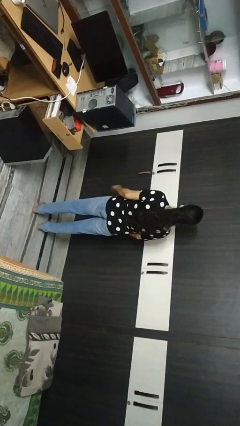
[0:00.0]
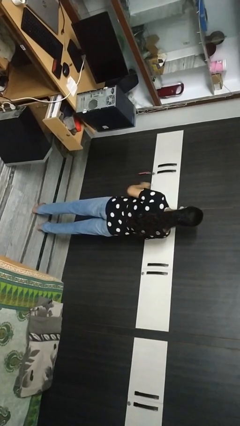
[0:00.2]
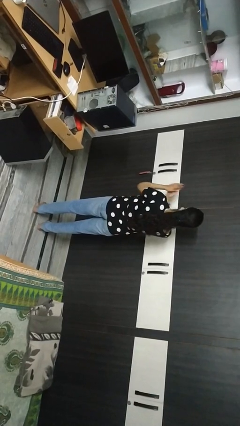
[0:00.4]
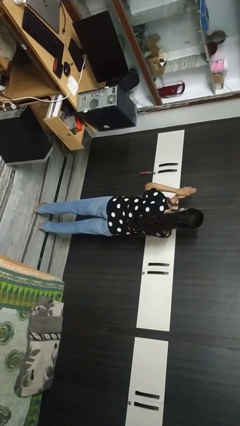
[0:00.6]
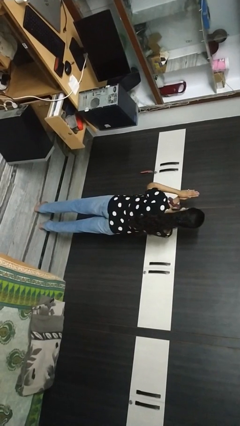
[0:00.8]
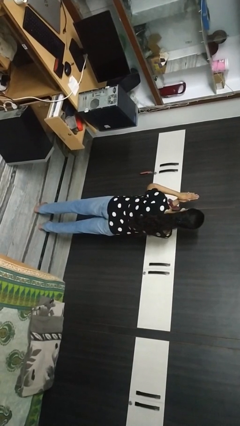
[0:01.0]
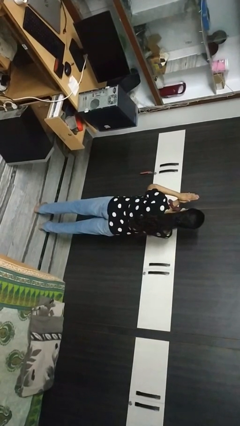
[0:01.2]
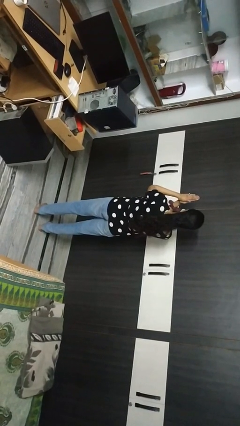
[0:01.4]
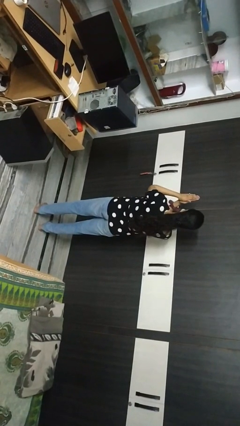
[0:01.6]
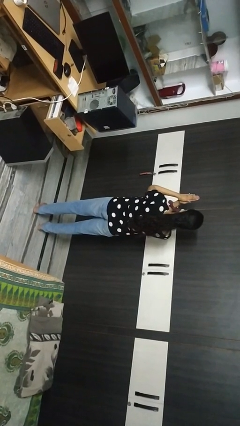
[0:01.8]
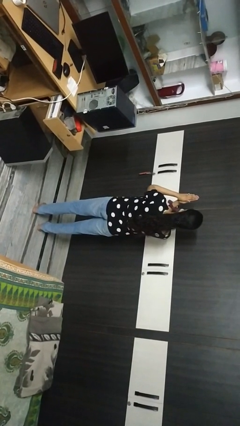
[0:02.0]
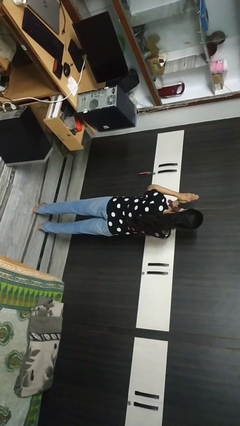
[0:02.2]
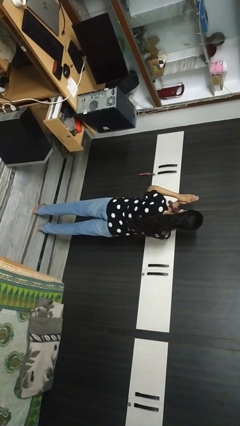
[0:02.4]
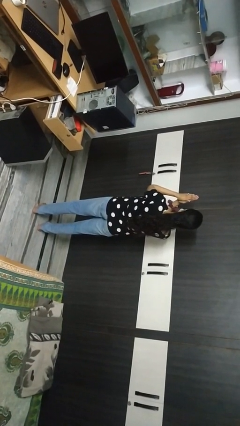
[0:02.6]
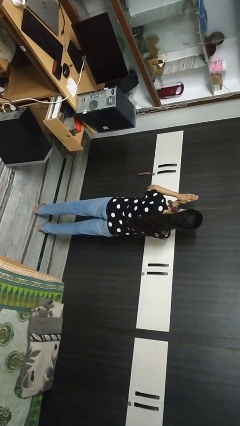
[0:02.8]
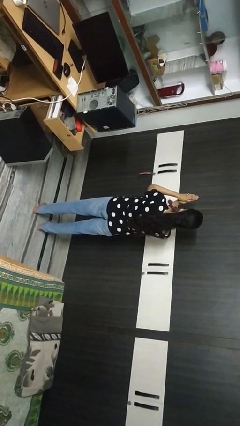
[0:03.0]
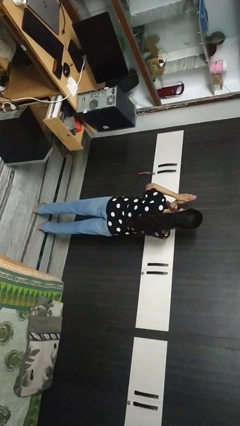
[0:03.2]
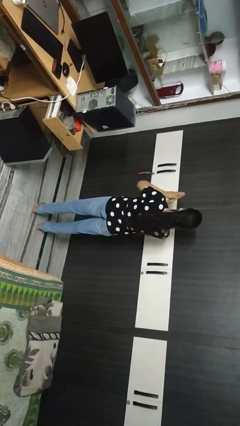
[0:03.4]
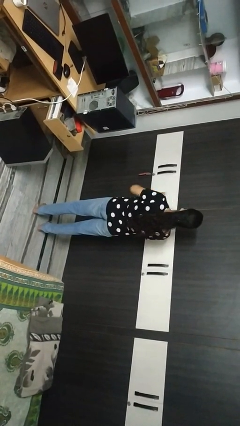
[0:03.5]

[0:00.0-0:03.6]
person prays

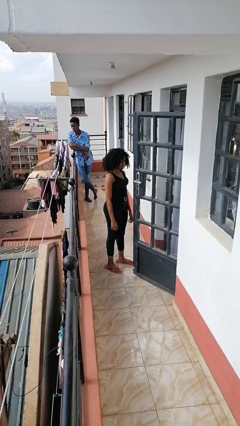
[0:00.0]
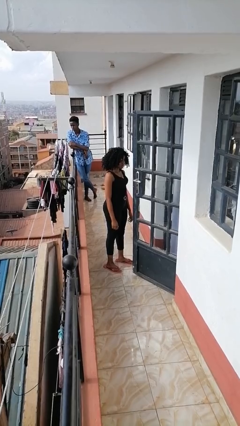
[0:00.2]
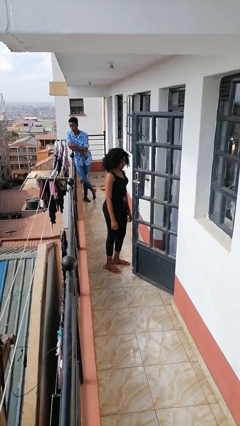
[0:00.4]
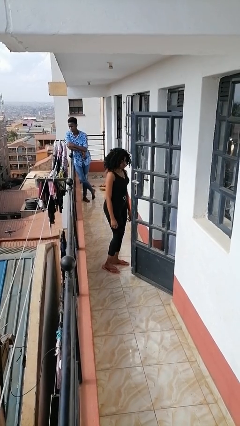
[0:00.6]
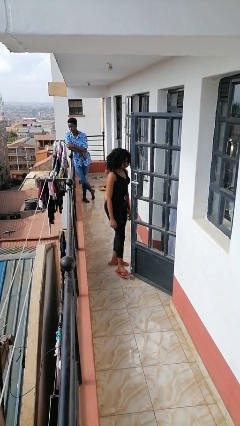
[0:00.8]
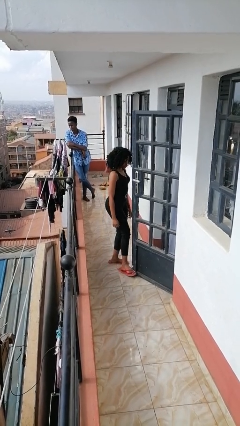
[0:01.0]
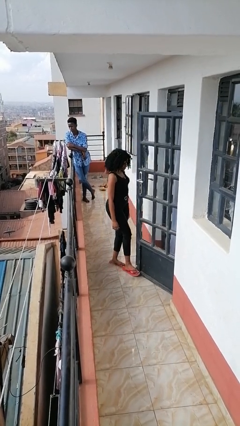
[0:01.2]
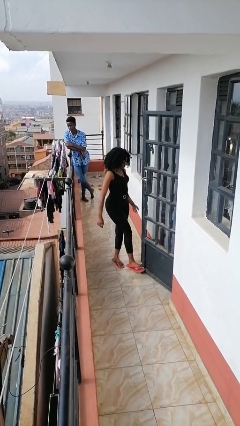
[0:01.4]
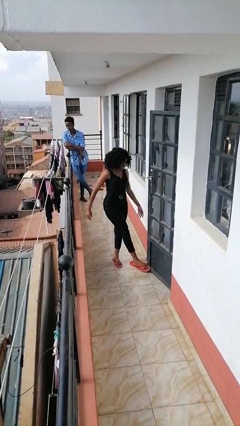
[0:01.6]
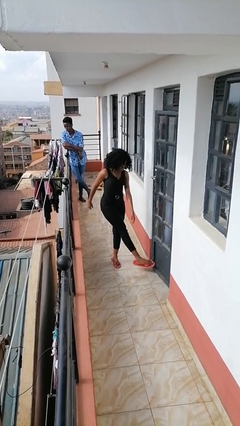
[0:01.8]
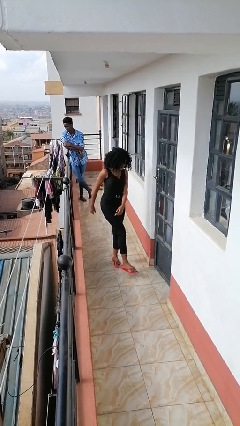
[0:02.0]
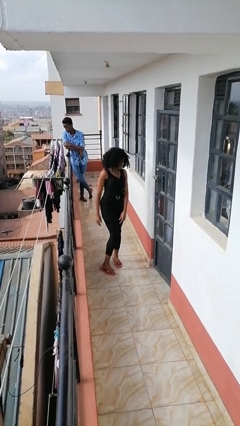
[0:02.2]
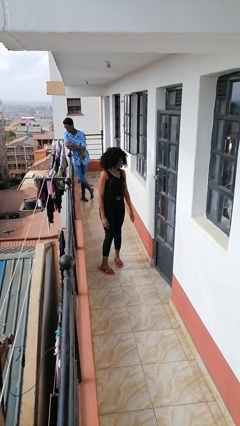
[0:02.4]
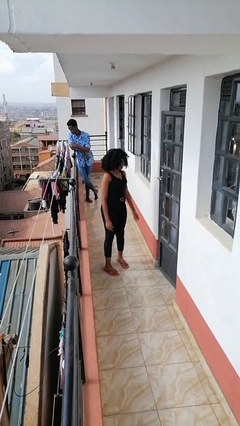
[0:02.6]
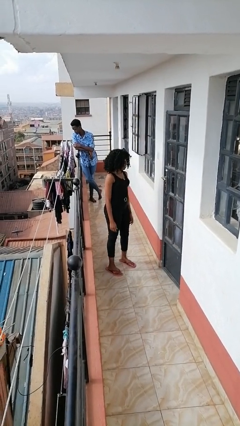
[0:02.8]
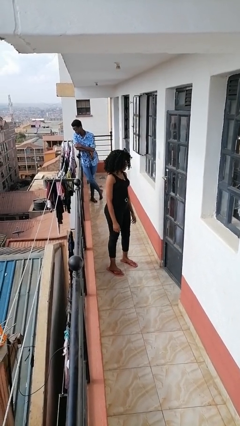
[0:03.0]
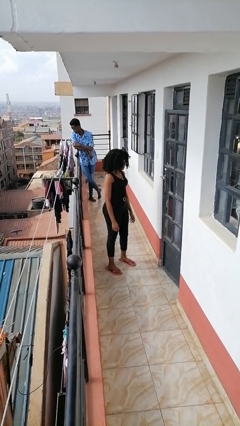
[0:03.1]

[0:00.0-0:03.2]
person closes door with foot

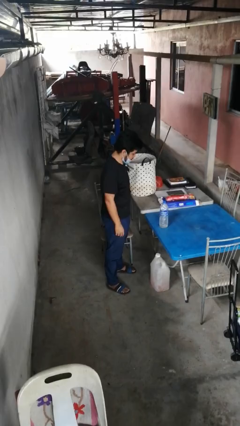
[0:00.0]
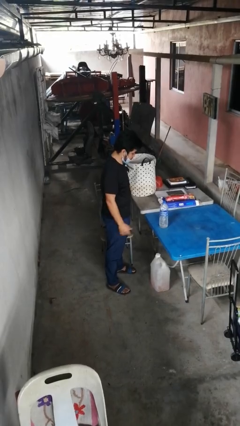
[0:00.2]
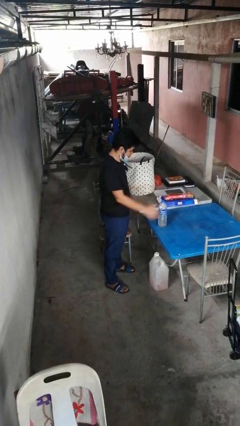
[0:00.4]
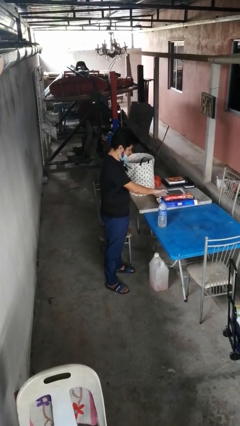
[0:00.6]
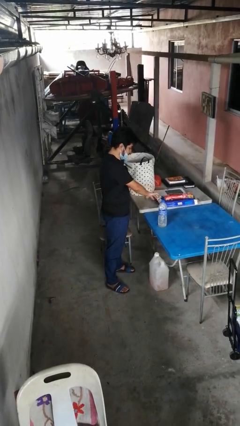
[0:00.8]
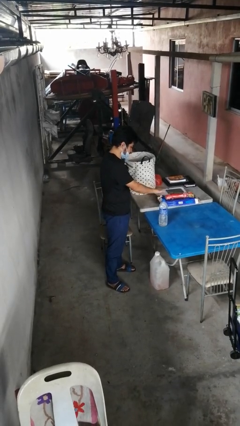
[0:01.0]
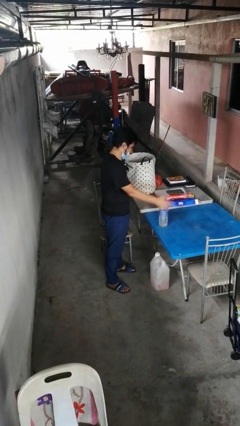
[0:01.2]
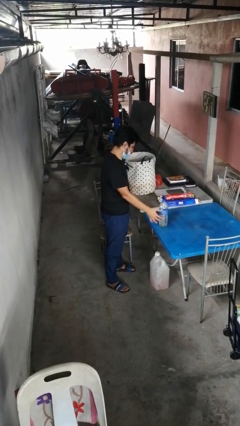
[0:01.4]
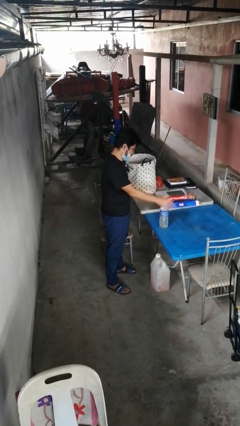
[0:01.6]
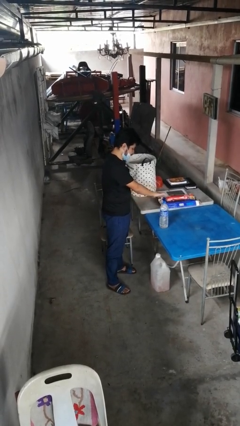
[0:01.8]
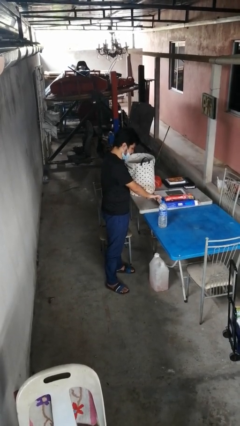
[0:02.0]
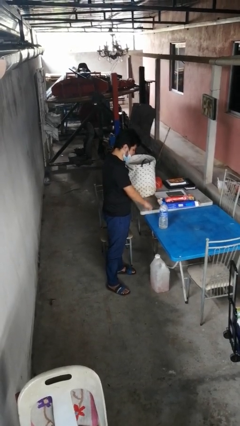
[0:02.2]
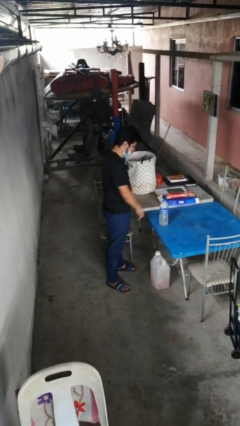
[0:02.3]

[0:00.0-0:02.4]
person waves hand over object

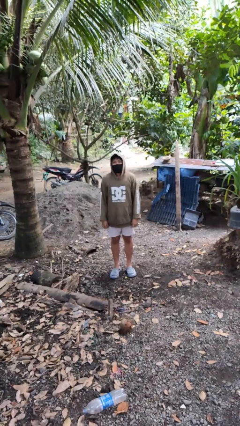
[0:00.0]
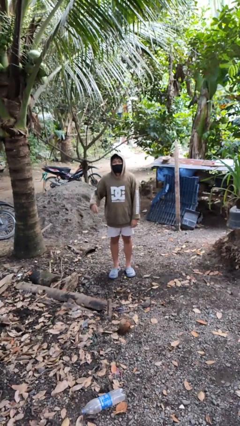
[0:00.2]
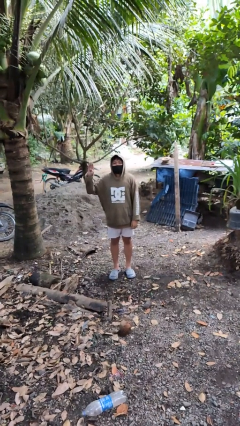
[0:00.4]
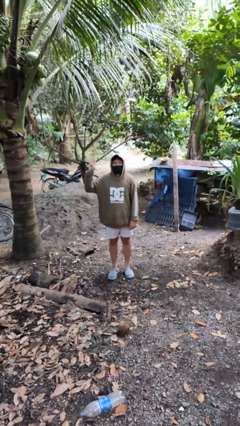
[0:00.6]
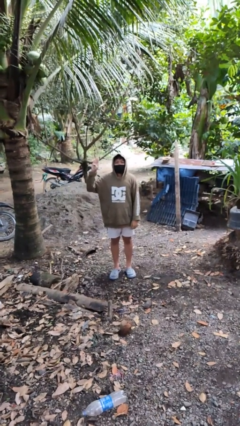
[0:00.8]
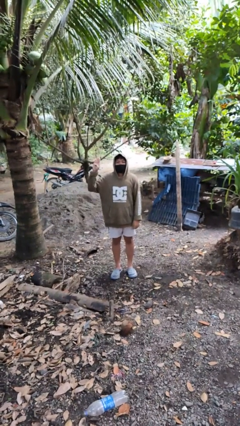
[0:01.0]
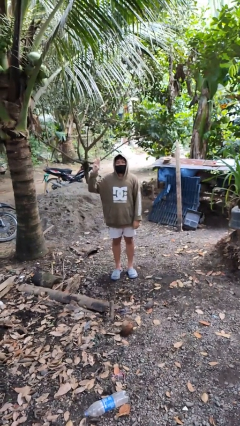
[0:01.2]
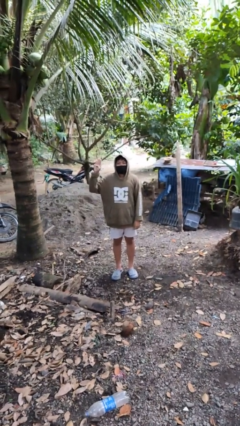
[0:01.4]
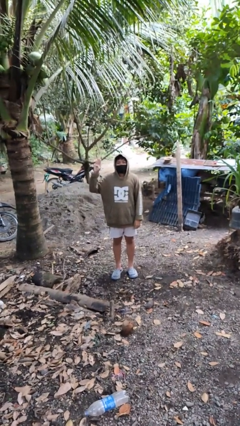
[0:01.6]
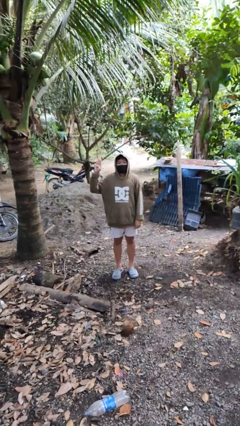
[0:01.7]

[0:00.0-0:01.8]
person gestures number four

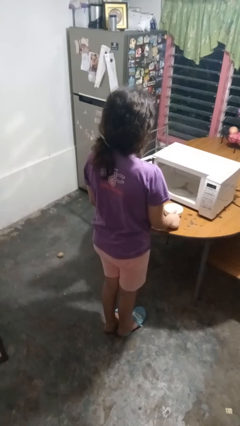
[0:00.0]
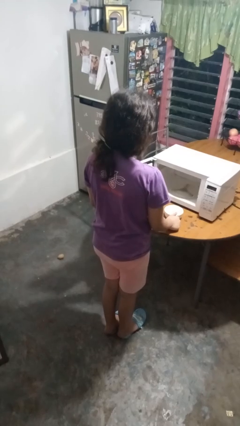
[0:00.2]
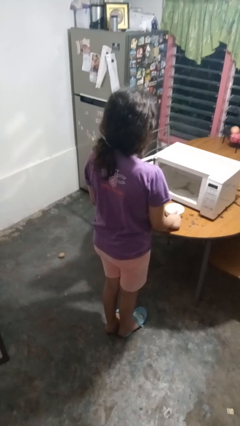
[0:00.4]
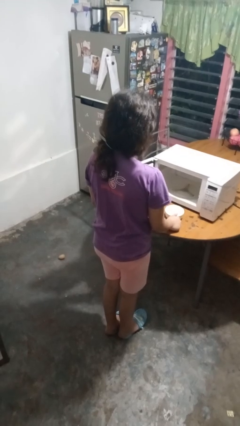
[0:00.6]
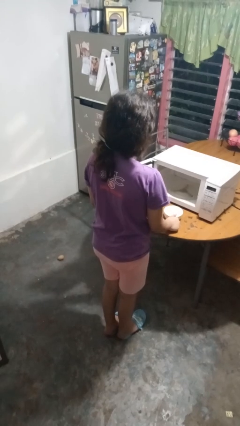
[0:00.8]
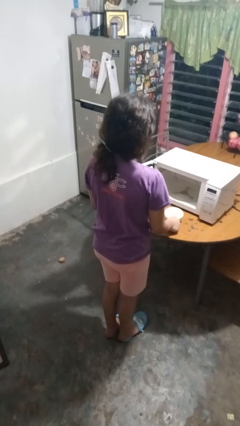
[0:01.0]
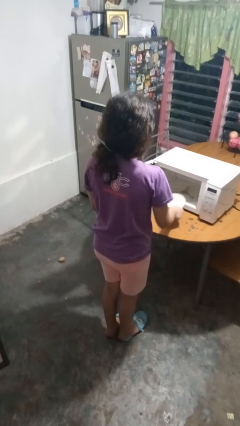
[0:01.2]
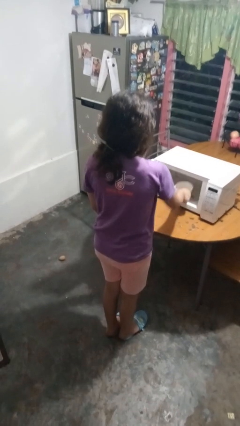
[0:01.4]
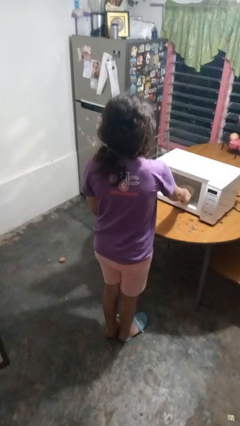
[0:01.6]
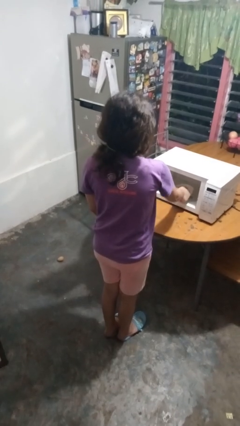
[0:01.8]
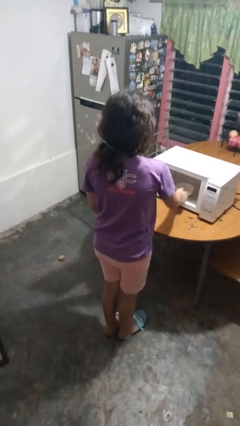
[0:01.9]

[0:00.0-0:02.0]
person puts object into microwave

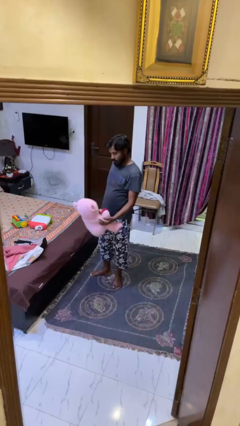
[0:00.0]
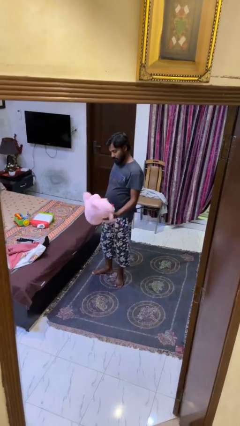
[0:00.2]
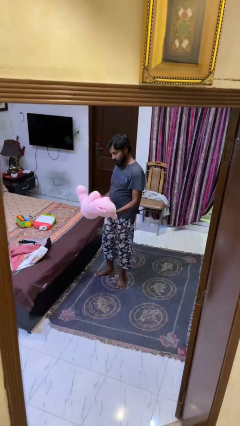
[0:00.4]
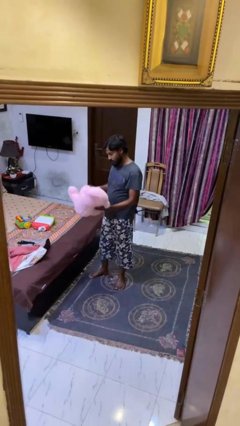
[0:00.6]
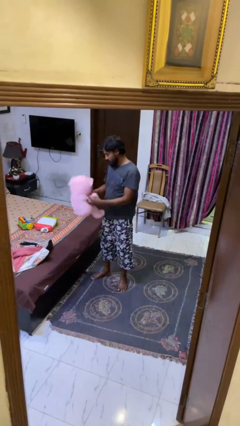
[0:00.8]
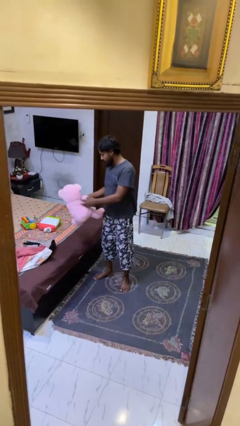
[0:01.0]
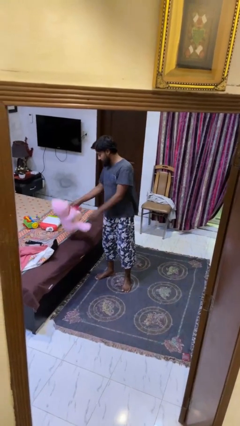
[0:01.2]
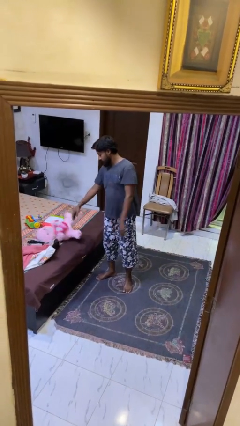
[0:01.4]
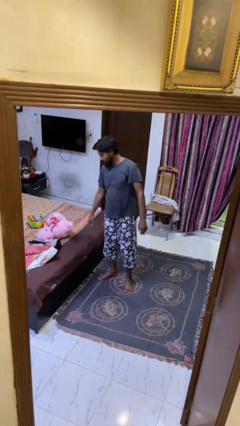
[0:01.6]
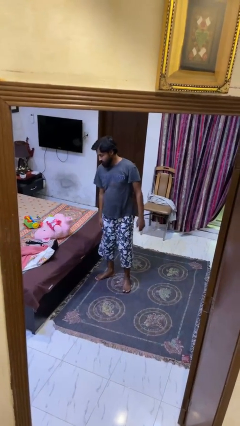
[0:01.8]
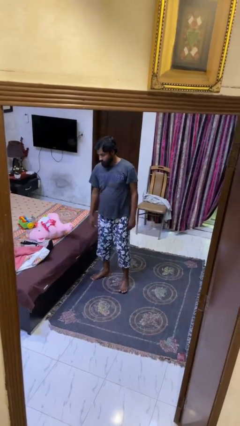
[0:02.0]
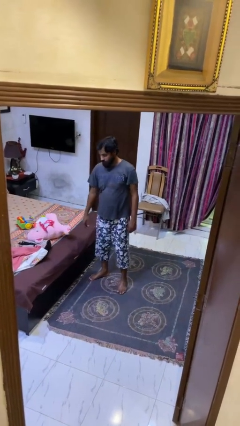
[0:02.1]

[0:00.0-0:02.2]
person puts down object on bed

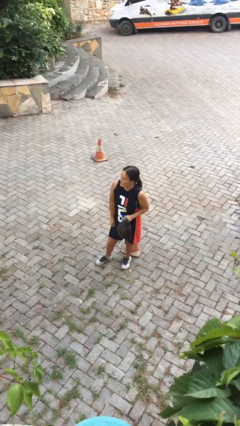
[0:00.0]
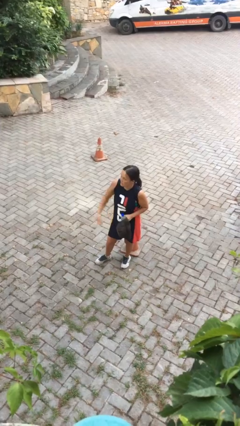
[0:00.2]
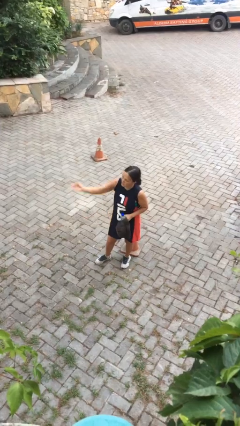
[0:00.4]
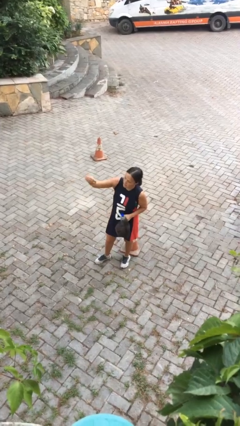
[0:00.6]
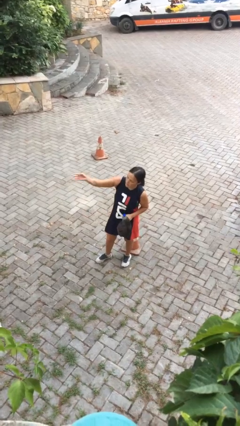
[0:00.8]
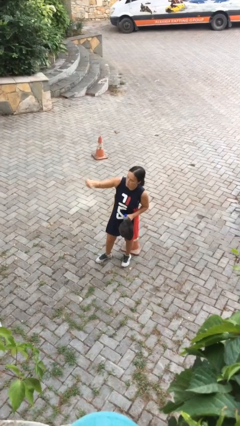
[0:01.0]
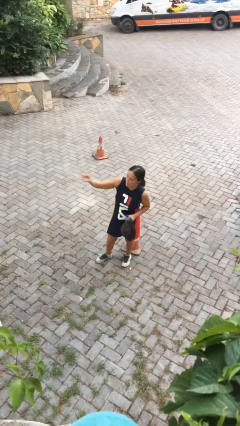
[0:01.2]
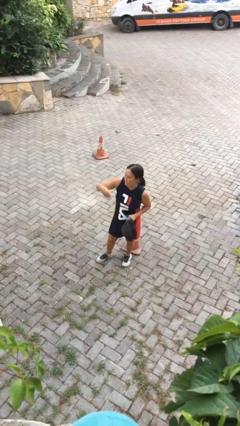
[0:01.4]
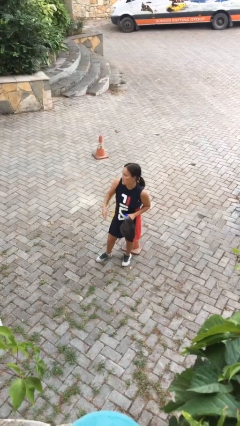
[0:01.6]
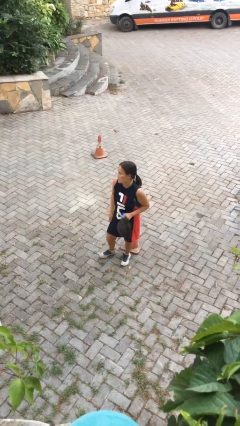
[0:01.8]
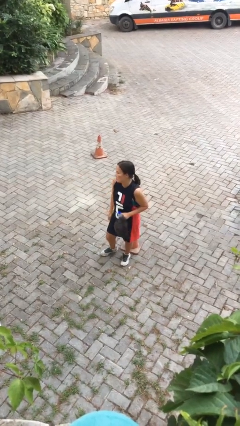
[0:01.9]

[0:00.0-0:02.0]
person gestures come here
